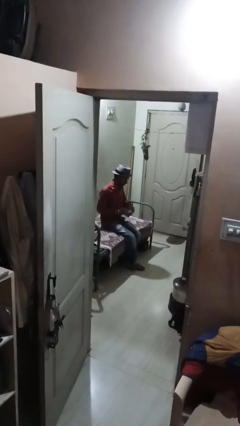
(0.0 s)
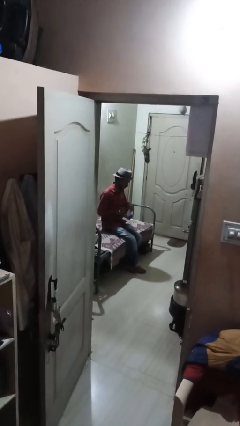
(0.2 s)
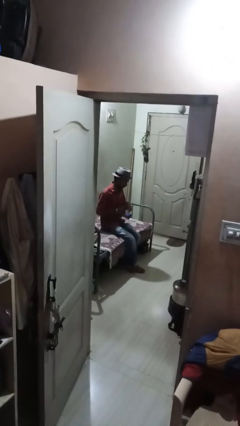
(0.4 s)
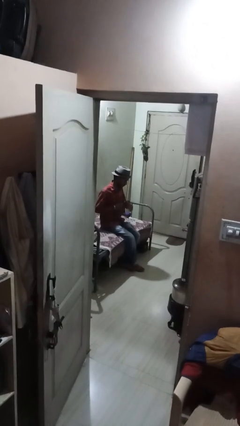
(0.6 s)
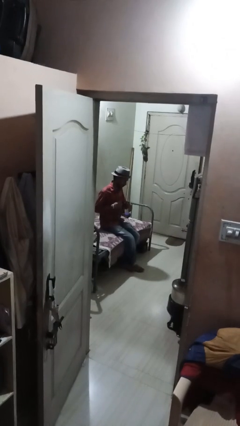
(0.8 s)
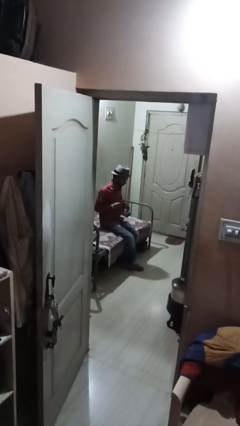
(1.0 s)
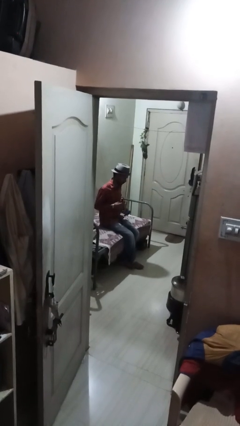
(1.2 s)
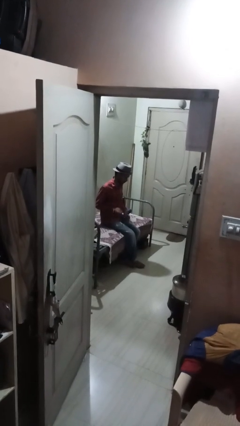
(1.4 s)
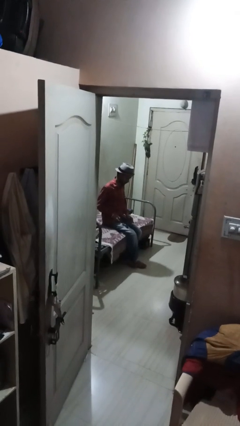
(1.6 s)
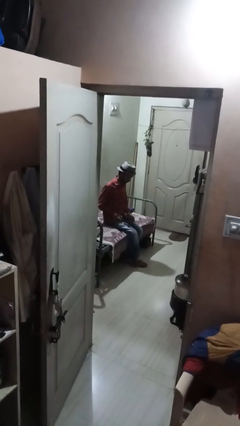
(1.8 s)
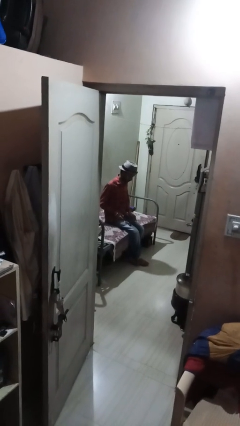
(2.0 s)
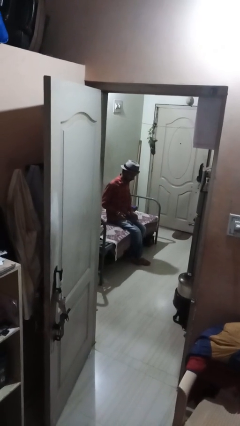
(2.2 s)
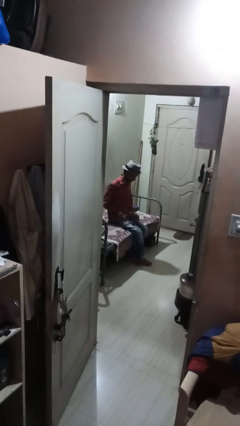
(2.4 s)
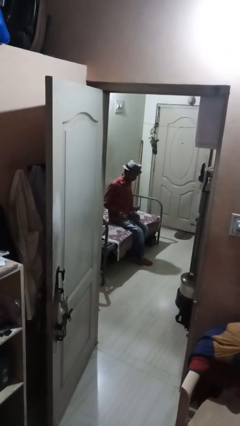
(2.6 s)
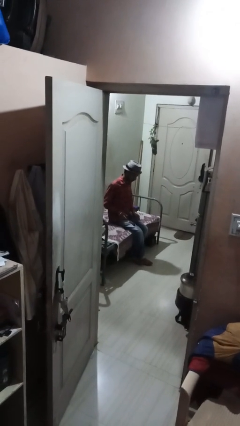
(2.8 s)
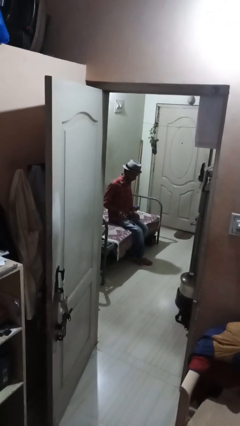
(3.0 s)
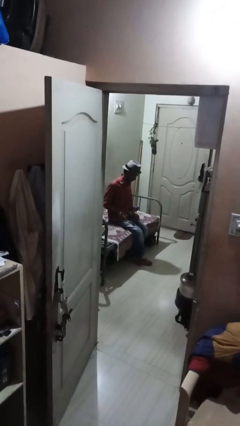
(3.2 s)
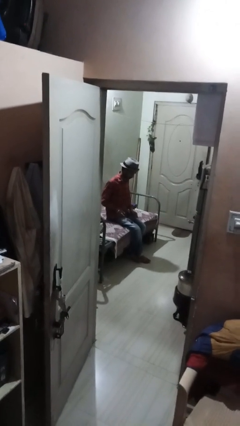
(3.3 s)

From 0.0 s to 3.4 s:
person takes off wristwatch

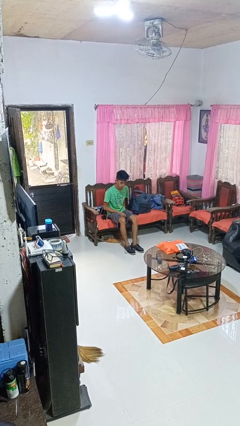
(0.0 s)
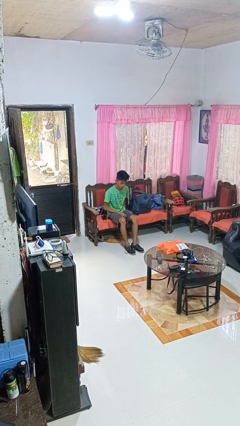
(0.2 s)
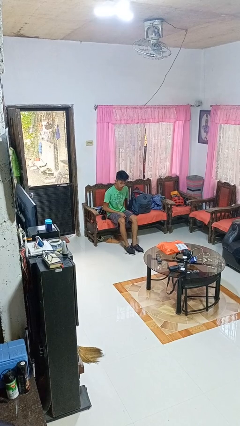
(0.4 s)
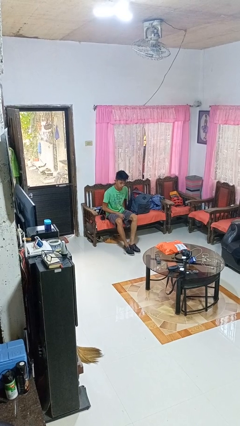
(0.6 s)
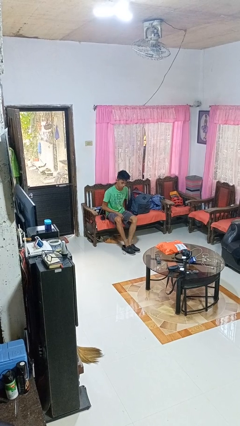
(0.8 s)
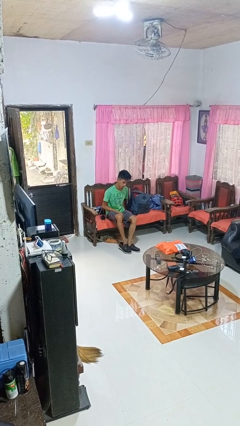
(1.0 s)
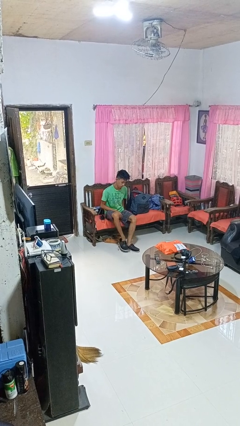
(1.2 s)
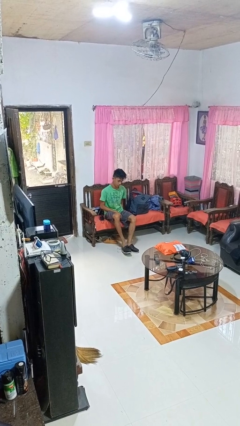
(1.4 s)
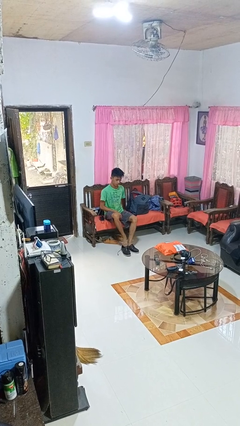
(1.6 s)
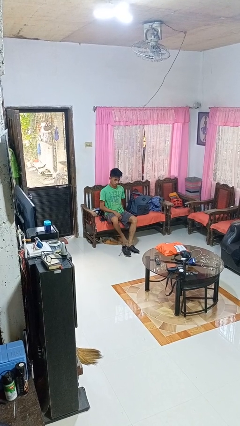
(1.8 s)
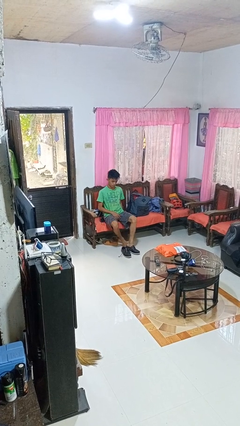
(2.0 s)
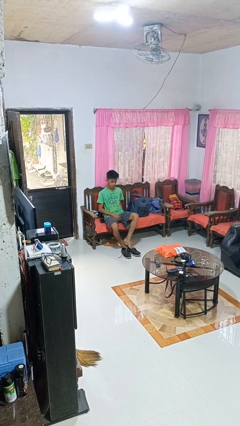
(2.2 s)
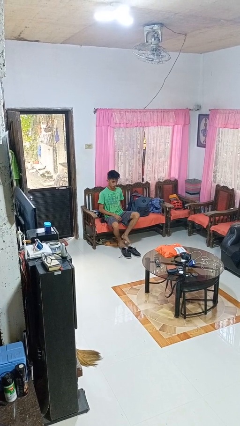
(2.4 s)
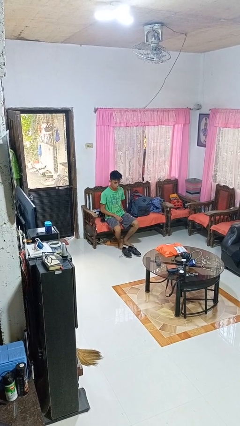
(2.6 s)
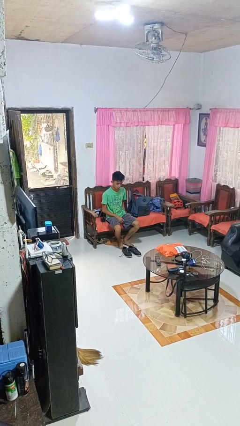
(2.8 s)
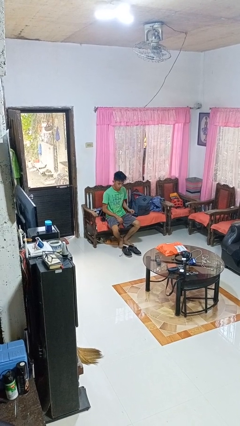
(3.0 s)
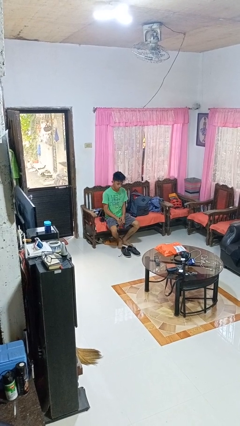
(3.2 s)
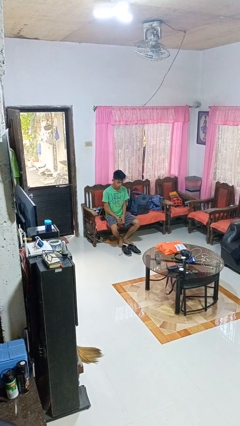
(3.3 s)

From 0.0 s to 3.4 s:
person takes off shoes

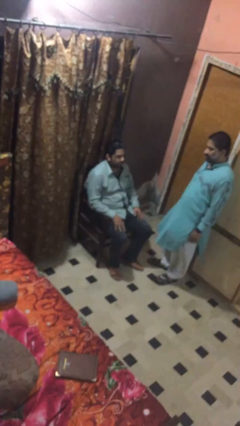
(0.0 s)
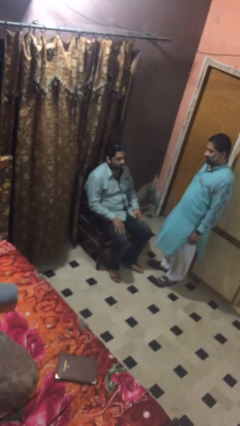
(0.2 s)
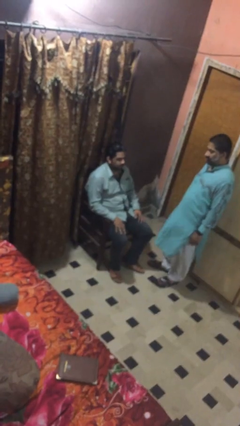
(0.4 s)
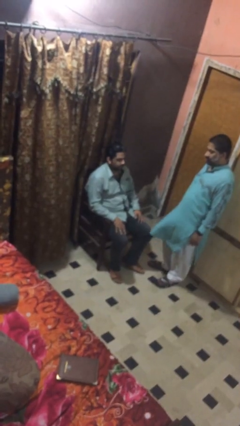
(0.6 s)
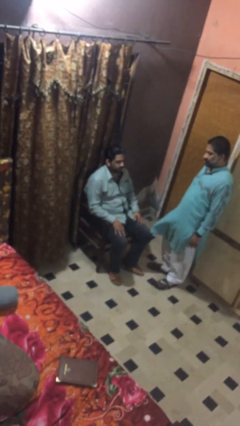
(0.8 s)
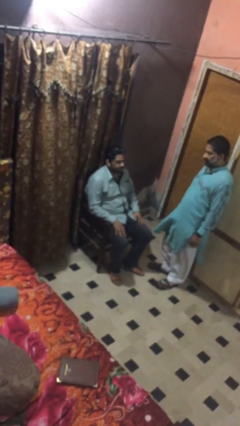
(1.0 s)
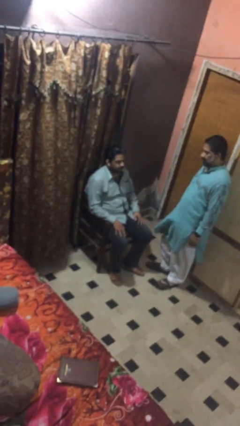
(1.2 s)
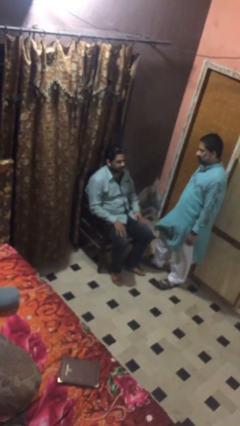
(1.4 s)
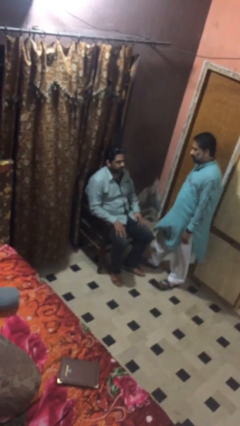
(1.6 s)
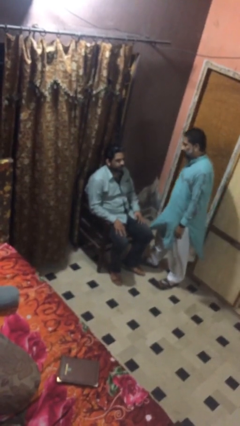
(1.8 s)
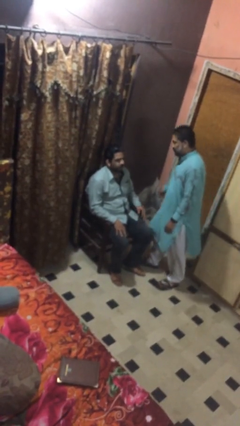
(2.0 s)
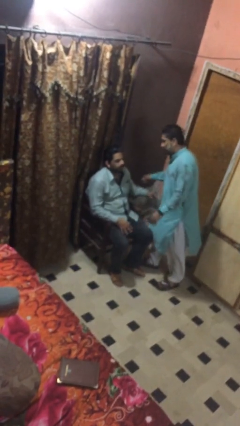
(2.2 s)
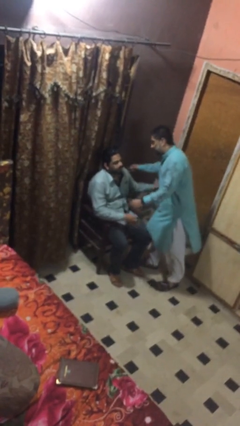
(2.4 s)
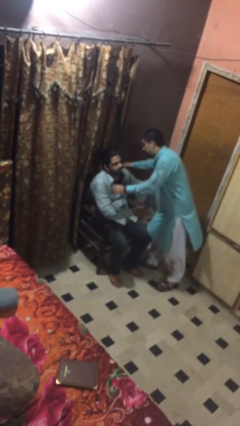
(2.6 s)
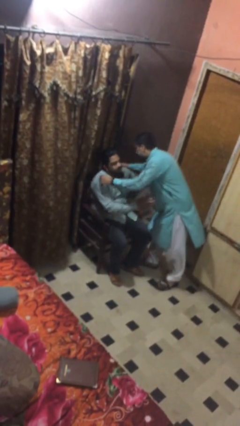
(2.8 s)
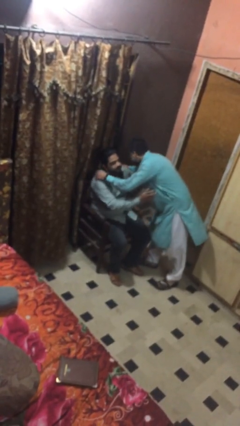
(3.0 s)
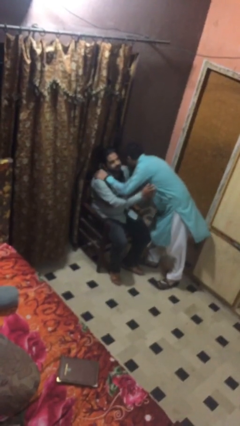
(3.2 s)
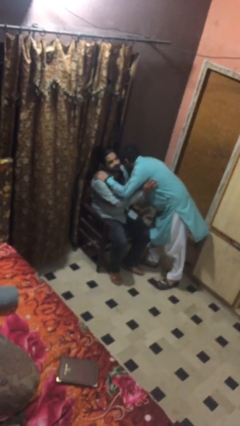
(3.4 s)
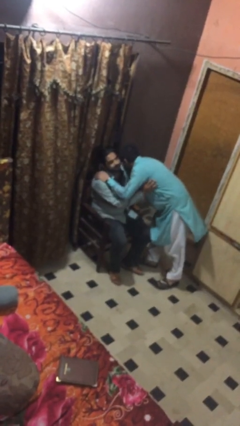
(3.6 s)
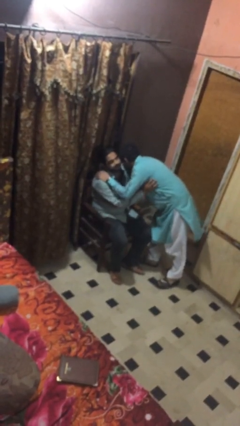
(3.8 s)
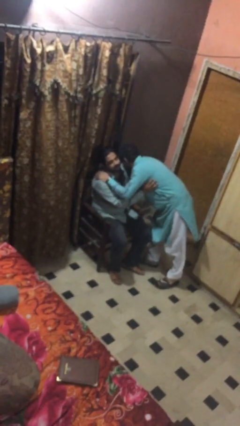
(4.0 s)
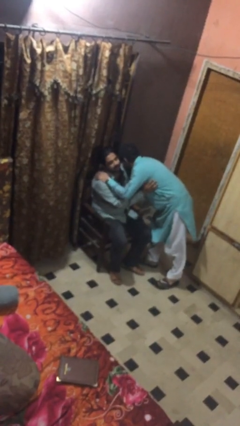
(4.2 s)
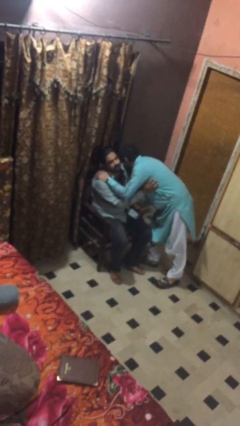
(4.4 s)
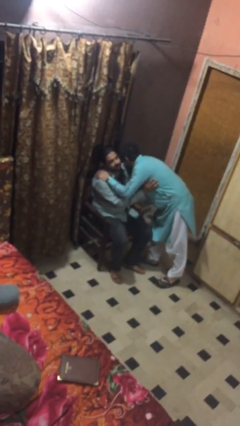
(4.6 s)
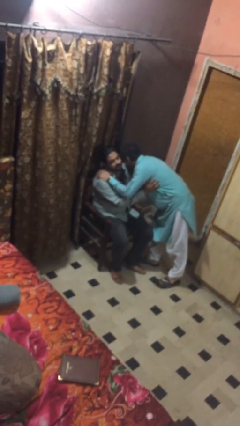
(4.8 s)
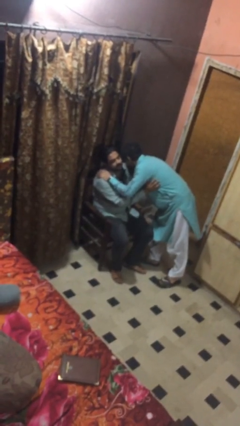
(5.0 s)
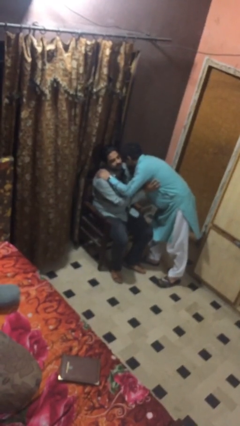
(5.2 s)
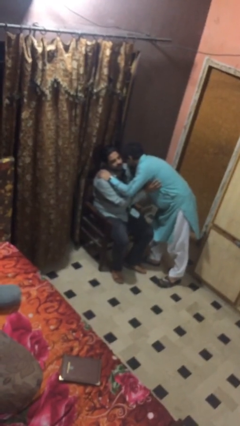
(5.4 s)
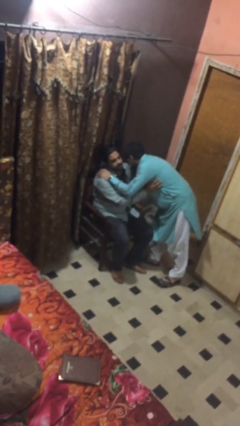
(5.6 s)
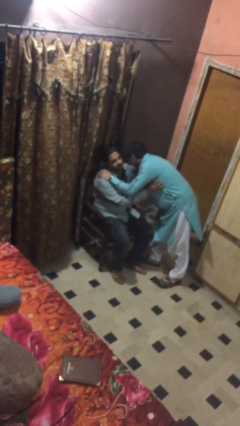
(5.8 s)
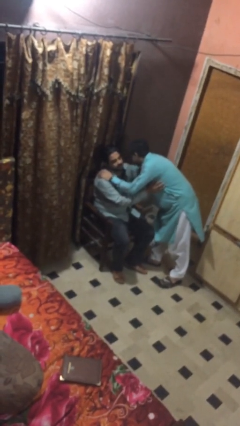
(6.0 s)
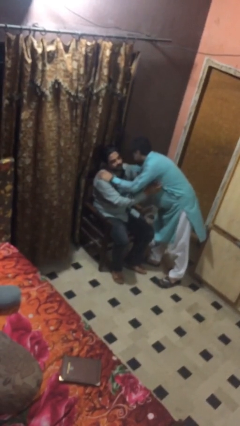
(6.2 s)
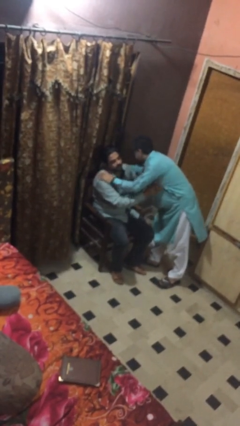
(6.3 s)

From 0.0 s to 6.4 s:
person embraces person

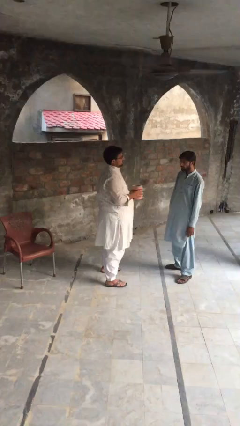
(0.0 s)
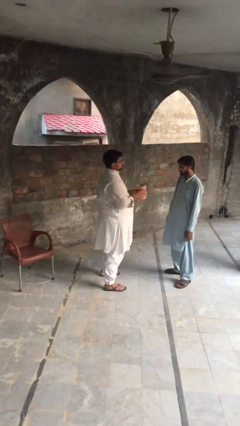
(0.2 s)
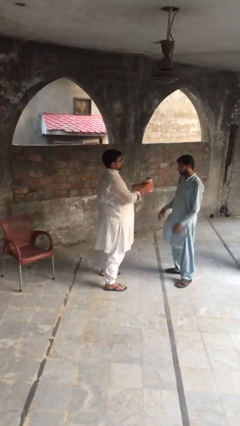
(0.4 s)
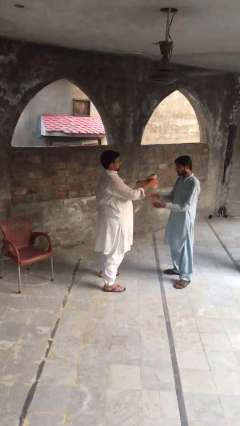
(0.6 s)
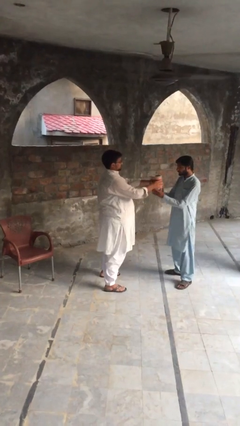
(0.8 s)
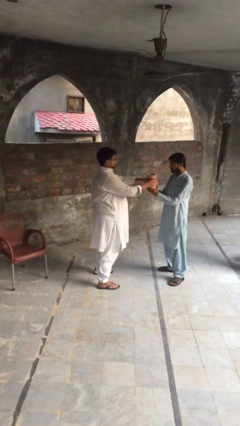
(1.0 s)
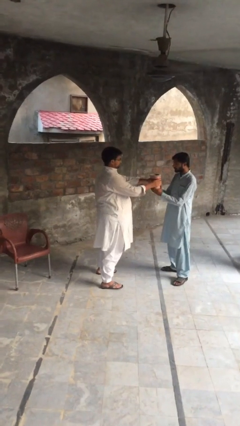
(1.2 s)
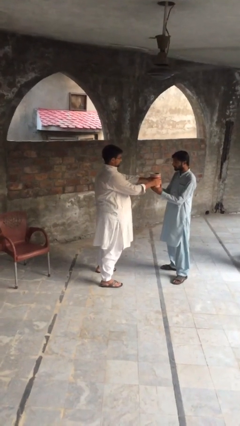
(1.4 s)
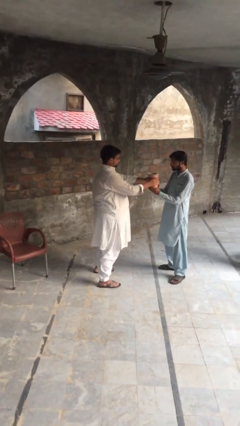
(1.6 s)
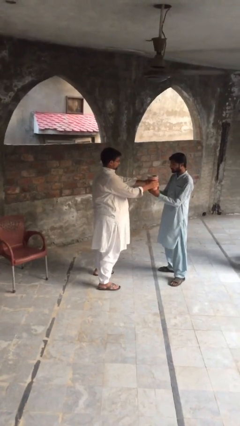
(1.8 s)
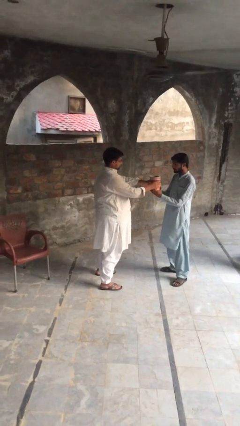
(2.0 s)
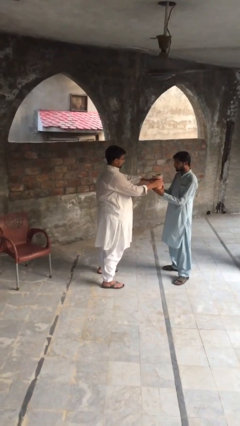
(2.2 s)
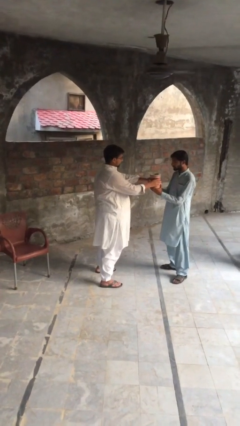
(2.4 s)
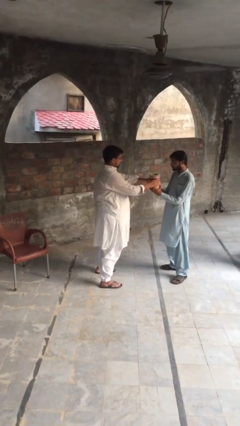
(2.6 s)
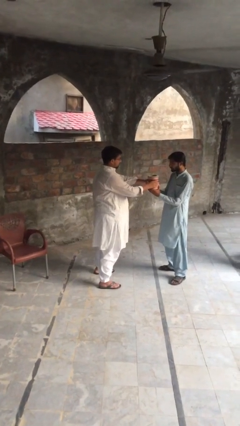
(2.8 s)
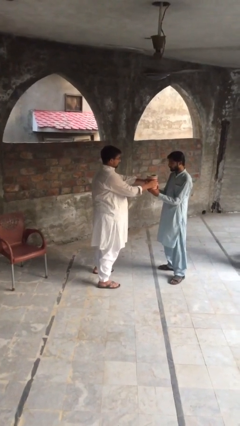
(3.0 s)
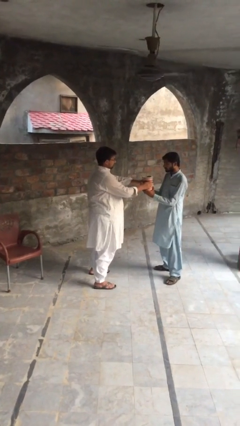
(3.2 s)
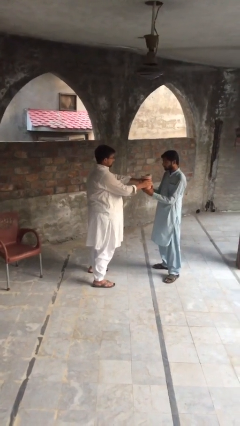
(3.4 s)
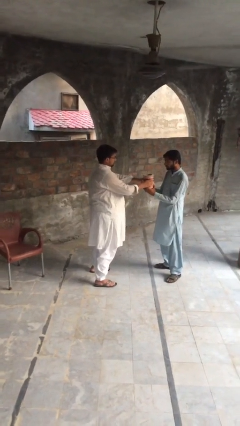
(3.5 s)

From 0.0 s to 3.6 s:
person transfers object to person

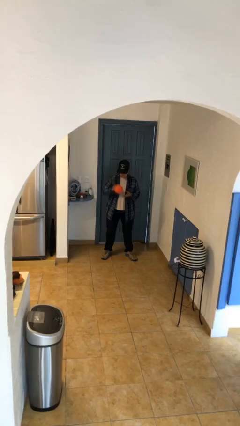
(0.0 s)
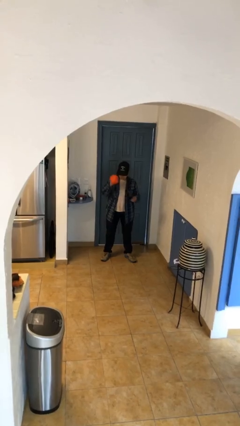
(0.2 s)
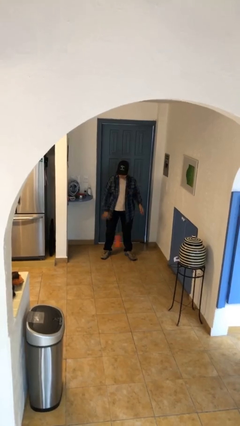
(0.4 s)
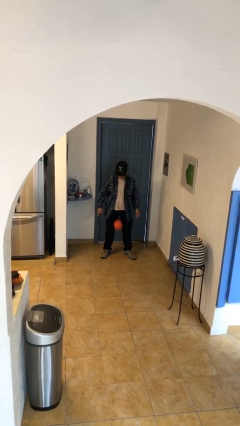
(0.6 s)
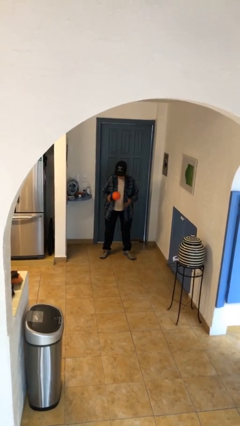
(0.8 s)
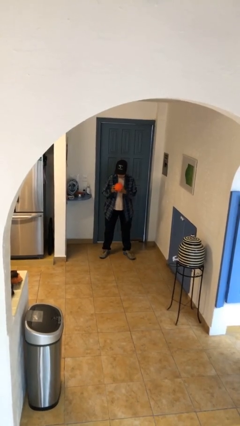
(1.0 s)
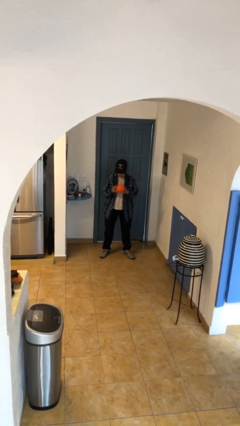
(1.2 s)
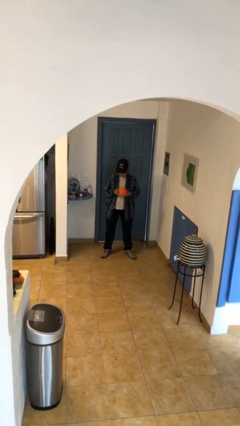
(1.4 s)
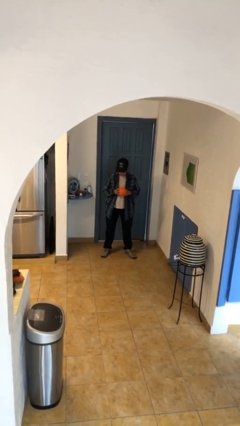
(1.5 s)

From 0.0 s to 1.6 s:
person bounces ball on floor
